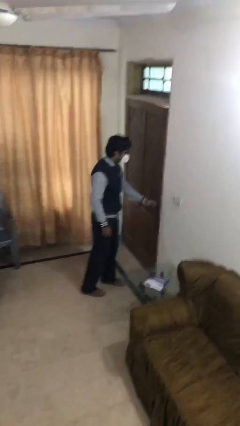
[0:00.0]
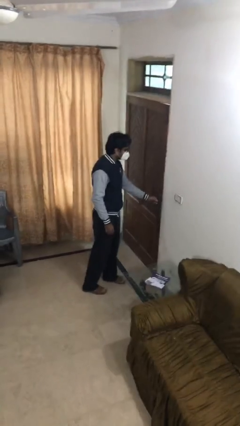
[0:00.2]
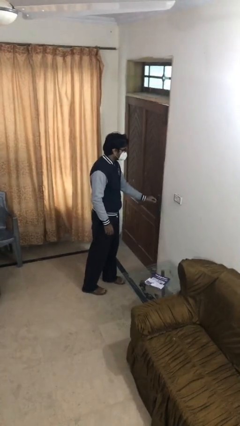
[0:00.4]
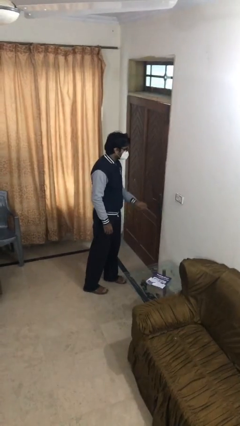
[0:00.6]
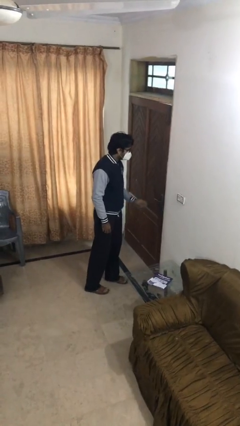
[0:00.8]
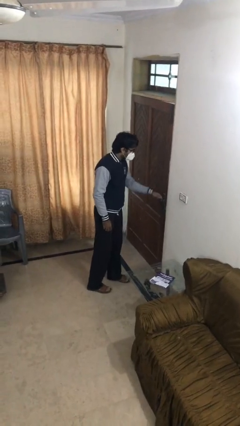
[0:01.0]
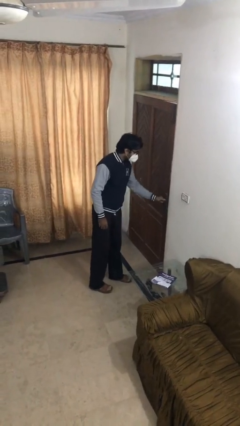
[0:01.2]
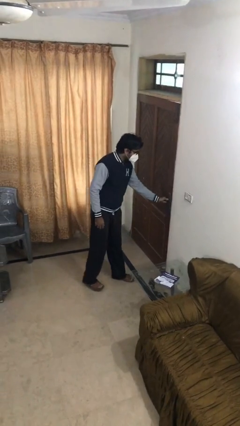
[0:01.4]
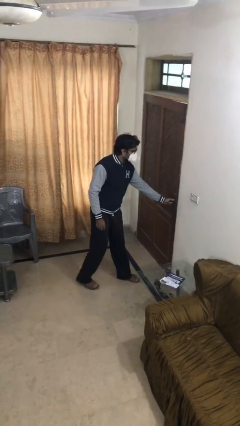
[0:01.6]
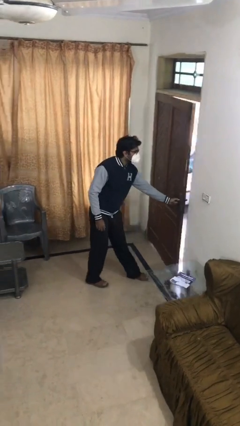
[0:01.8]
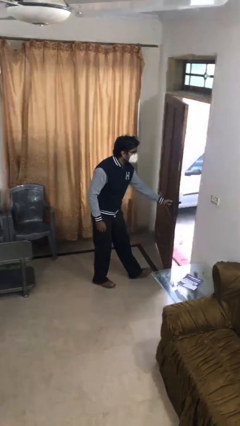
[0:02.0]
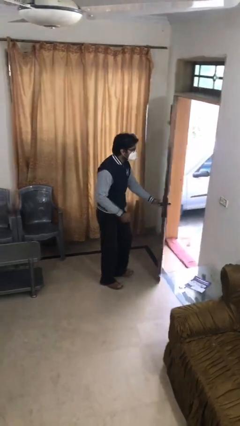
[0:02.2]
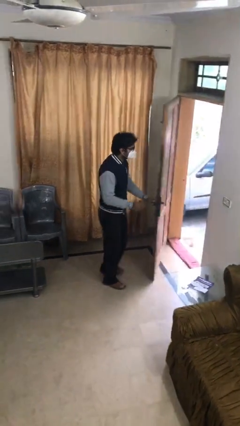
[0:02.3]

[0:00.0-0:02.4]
person opens facility door

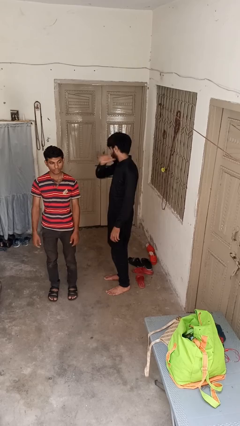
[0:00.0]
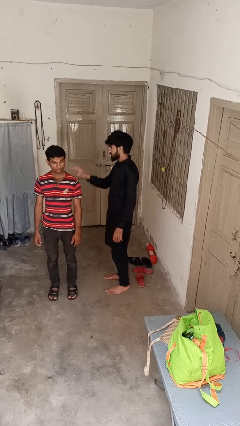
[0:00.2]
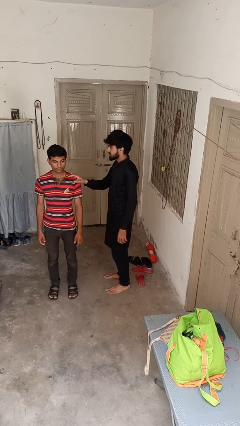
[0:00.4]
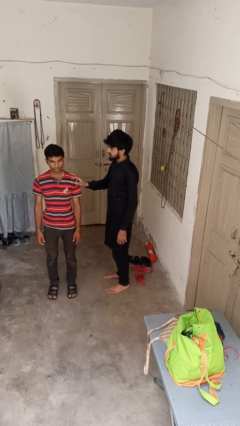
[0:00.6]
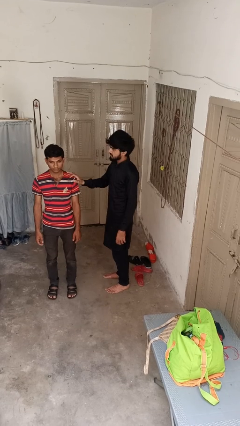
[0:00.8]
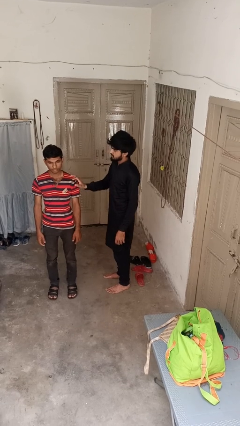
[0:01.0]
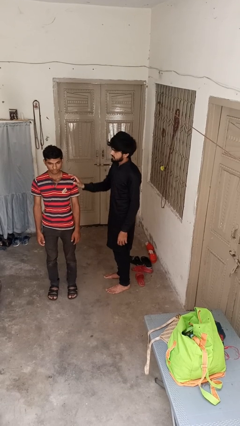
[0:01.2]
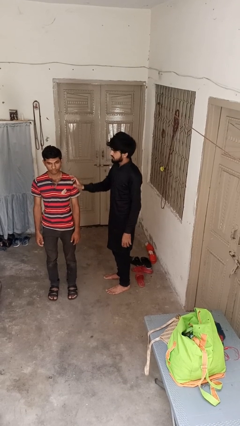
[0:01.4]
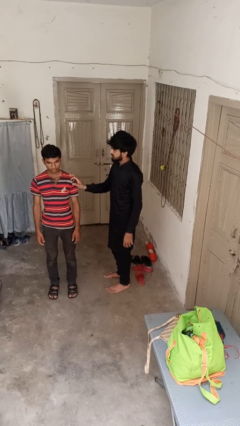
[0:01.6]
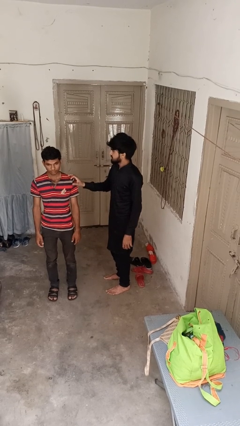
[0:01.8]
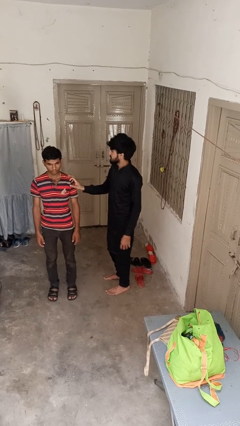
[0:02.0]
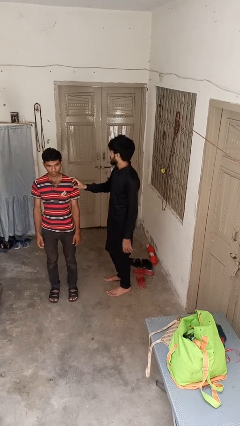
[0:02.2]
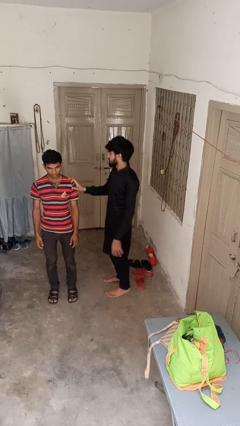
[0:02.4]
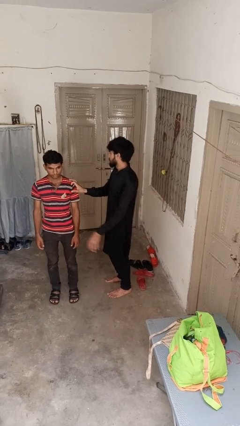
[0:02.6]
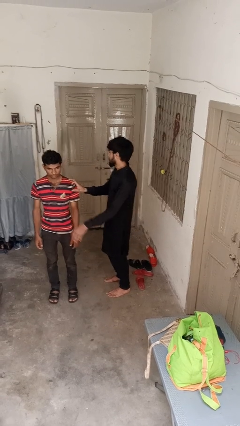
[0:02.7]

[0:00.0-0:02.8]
person grabs person by shoulder

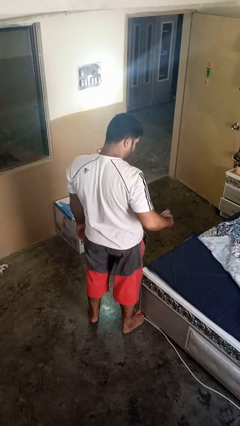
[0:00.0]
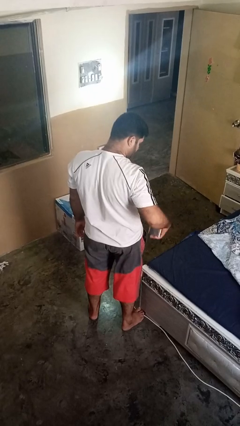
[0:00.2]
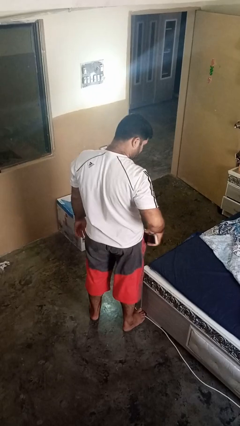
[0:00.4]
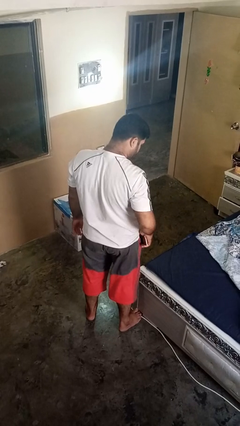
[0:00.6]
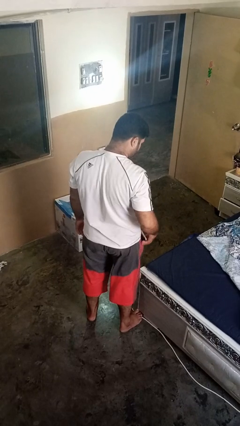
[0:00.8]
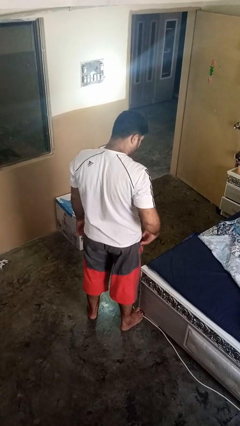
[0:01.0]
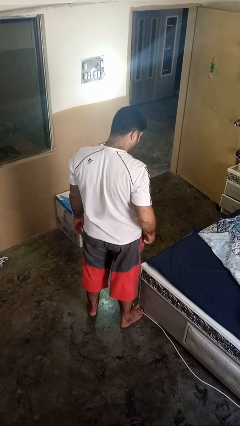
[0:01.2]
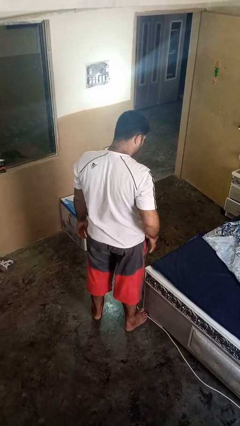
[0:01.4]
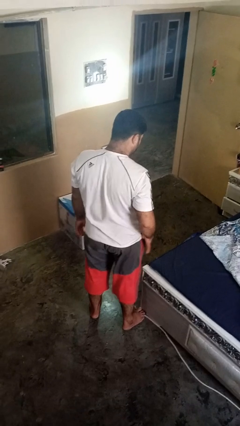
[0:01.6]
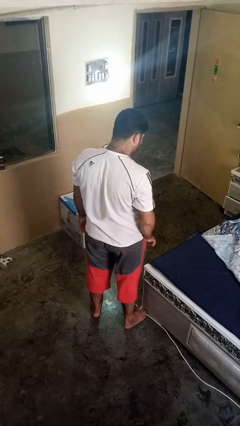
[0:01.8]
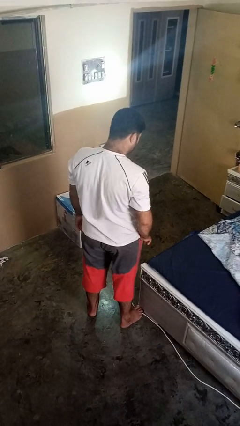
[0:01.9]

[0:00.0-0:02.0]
person puts phone into pocket

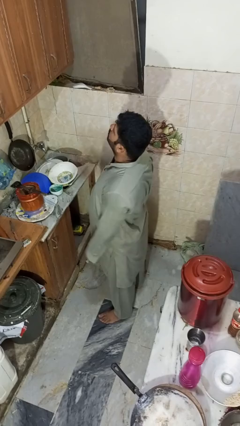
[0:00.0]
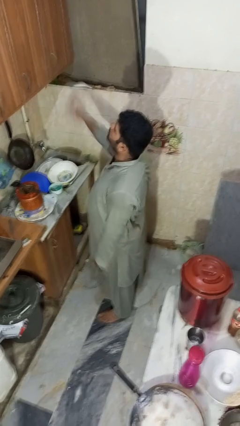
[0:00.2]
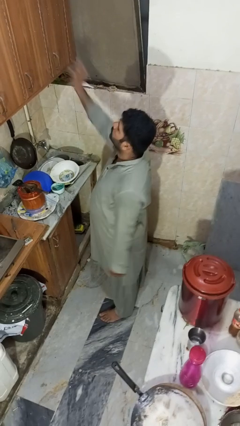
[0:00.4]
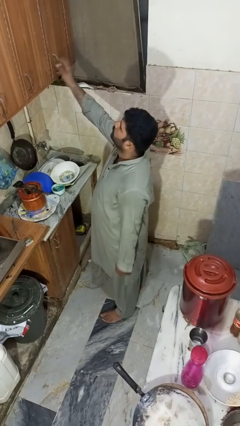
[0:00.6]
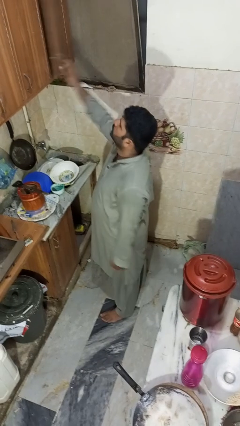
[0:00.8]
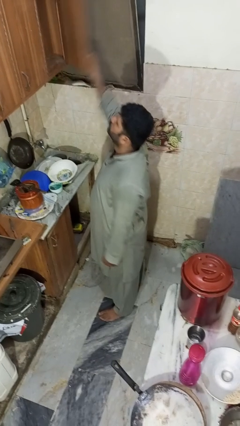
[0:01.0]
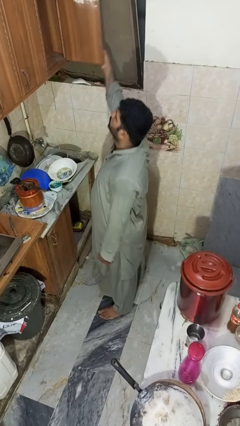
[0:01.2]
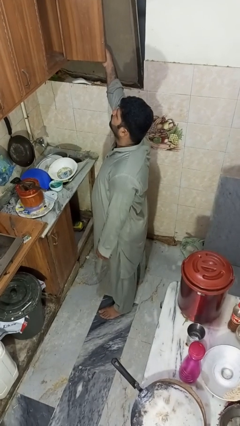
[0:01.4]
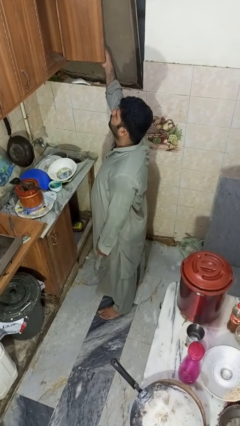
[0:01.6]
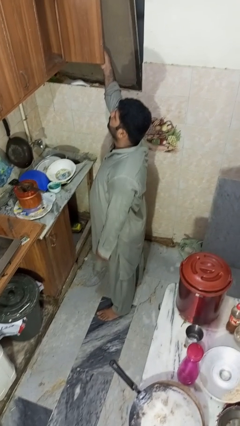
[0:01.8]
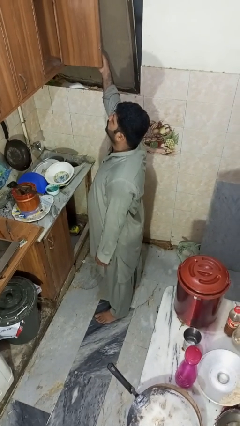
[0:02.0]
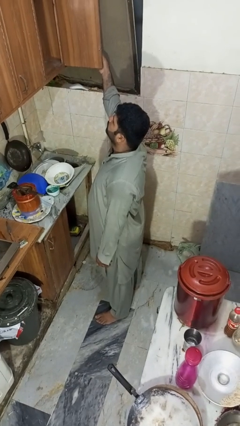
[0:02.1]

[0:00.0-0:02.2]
person opens cabinet

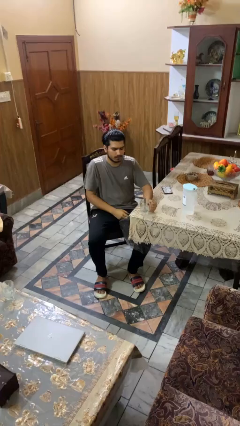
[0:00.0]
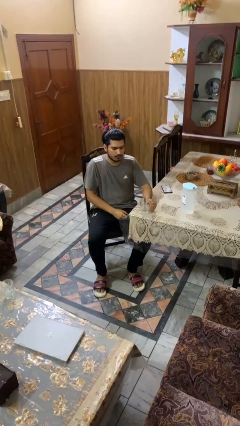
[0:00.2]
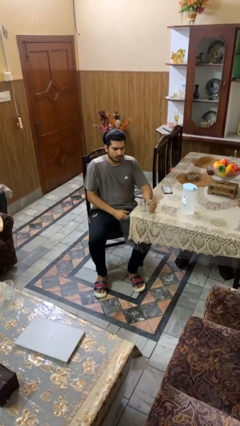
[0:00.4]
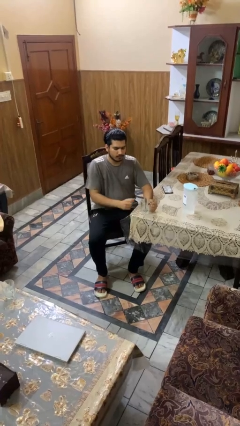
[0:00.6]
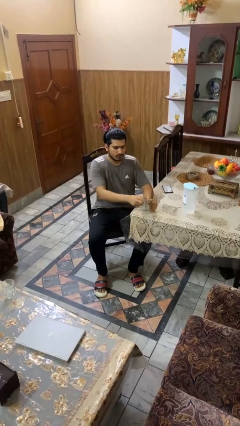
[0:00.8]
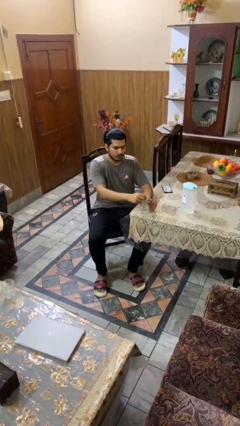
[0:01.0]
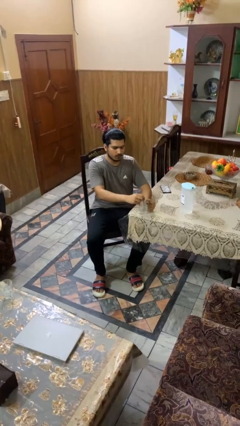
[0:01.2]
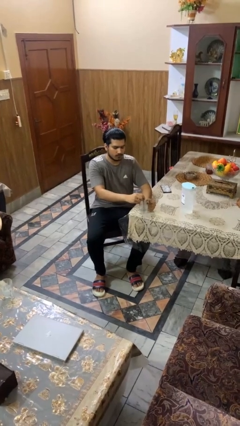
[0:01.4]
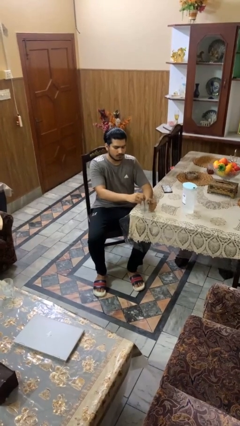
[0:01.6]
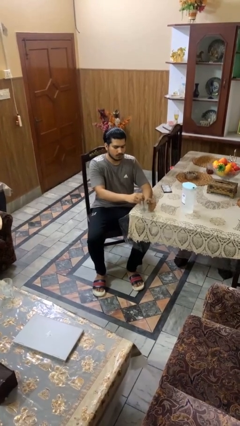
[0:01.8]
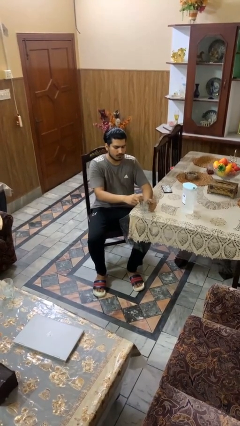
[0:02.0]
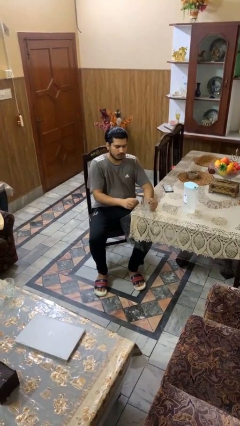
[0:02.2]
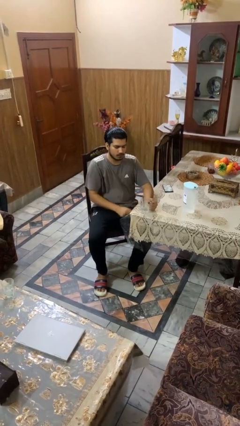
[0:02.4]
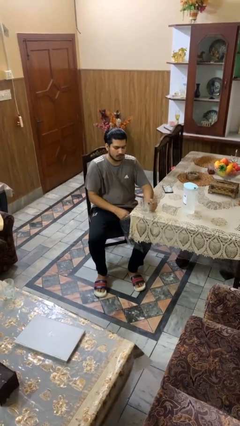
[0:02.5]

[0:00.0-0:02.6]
person stirs mug

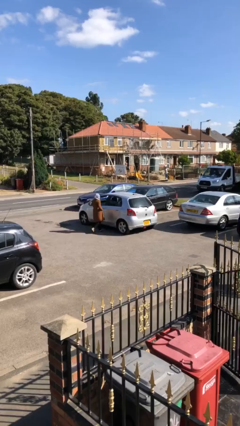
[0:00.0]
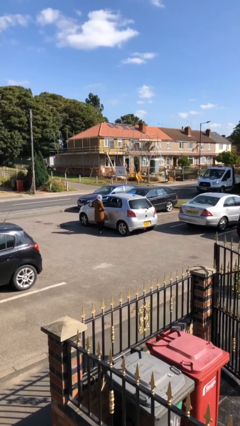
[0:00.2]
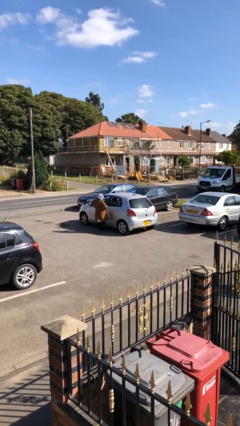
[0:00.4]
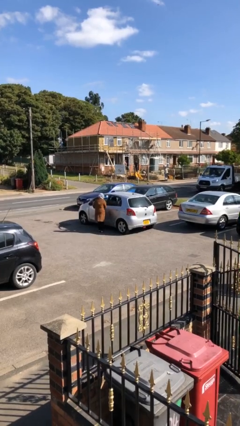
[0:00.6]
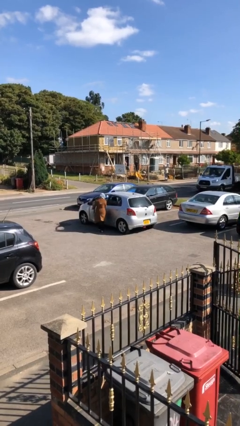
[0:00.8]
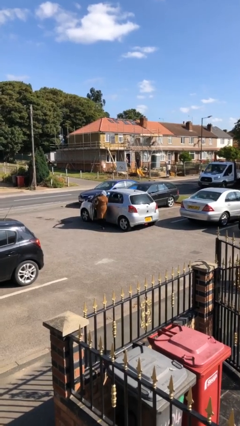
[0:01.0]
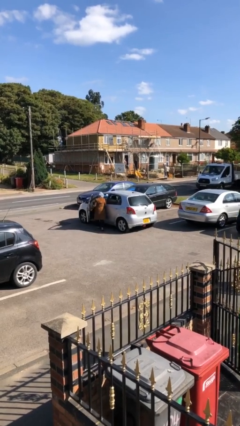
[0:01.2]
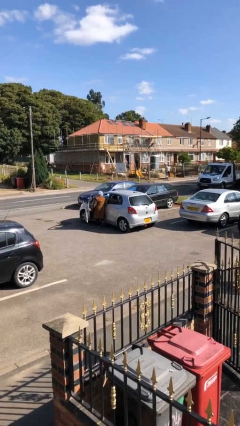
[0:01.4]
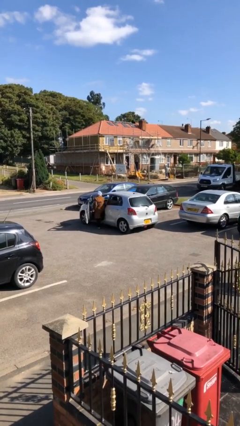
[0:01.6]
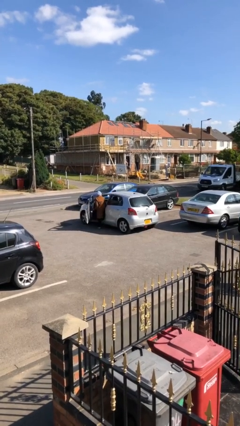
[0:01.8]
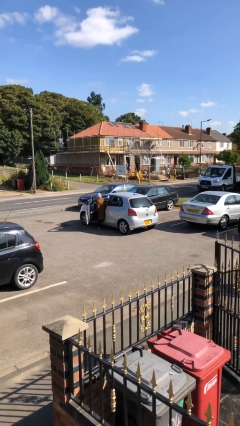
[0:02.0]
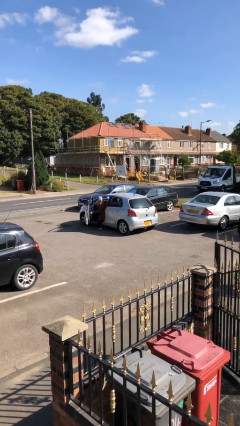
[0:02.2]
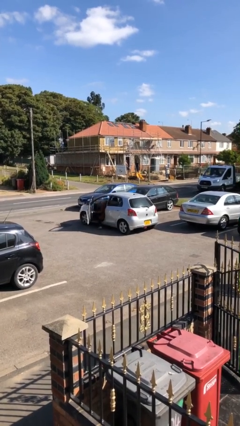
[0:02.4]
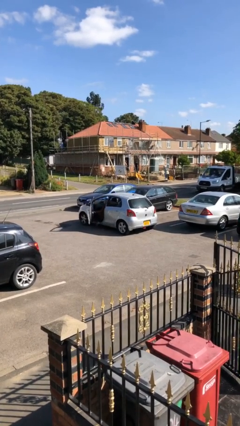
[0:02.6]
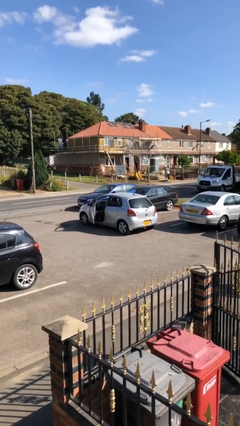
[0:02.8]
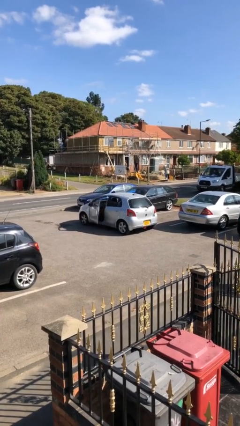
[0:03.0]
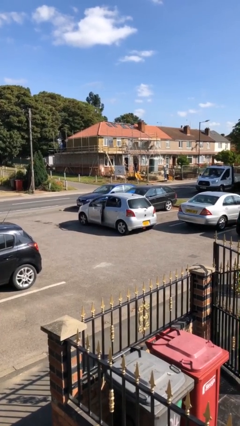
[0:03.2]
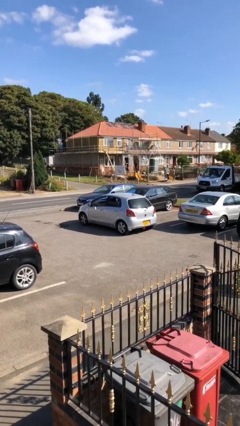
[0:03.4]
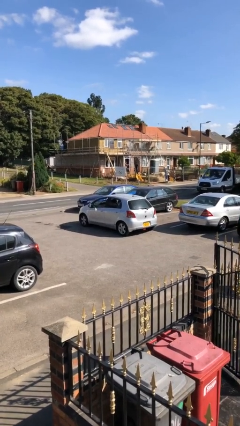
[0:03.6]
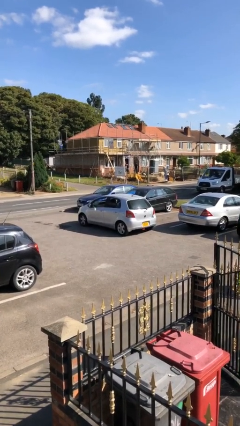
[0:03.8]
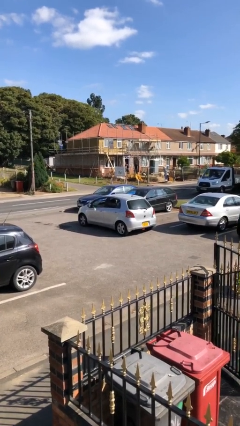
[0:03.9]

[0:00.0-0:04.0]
car picks up person

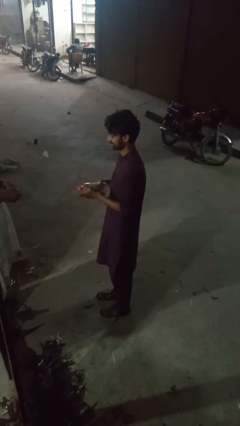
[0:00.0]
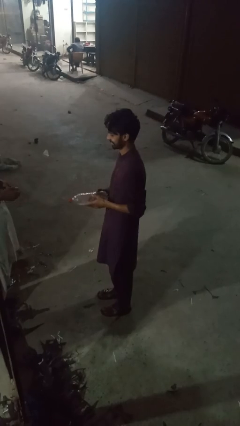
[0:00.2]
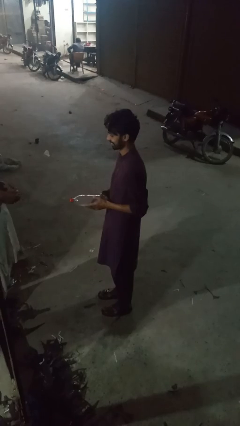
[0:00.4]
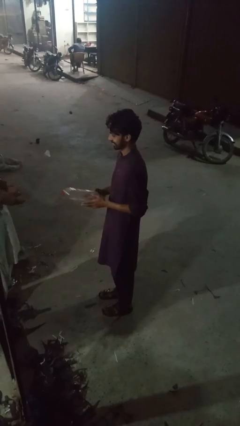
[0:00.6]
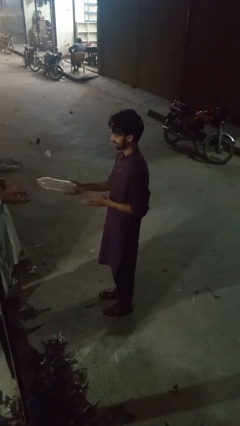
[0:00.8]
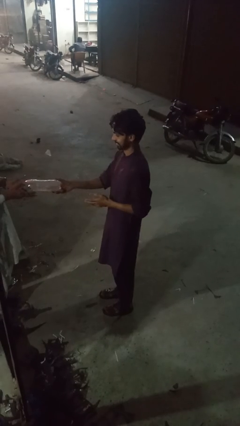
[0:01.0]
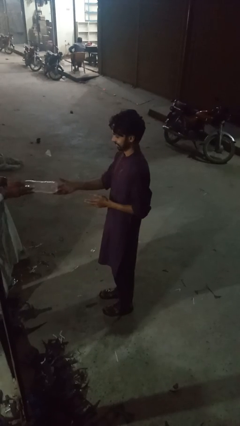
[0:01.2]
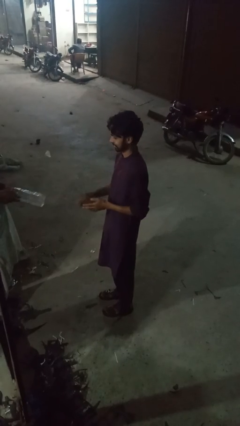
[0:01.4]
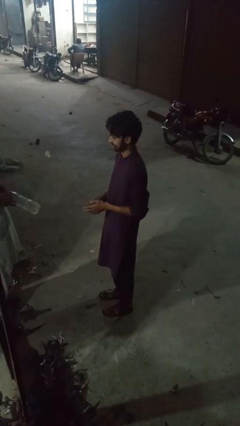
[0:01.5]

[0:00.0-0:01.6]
person throws object to person
